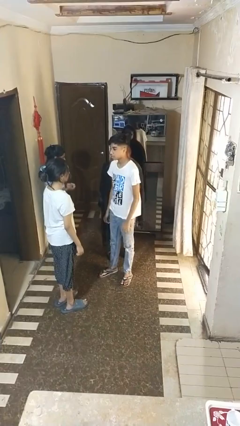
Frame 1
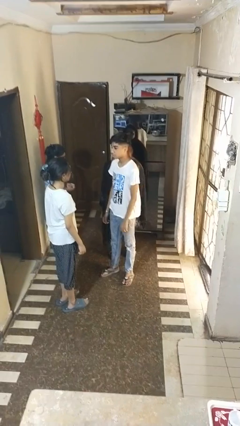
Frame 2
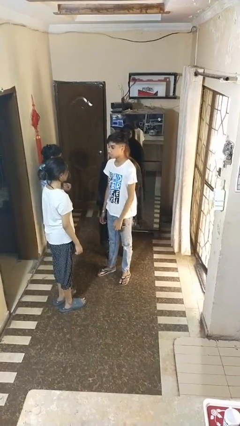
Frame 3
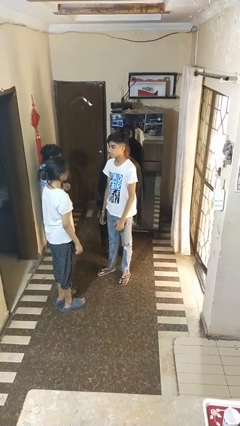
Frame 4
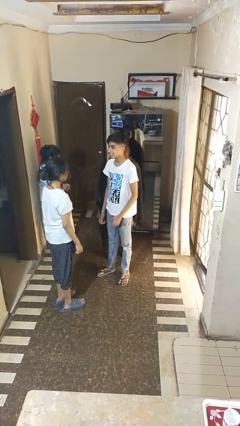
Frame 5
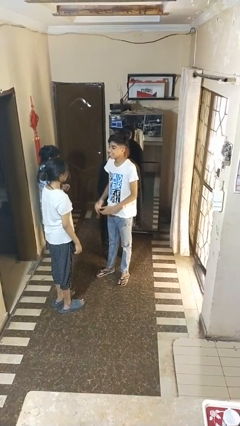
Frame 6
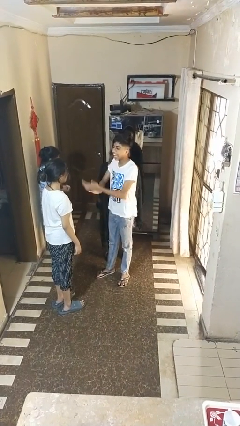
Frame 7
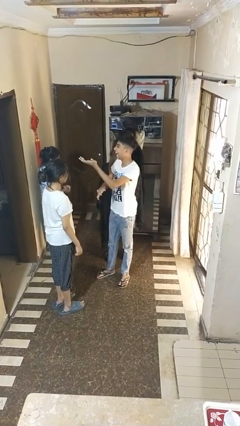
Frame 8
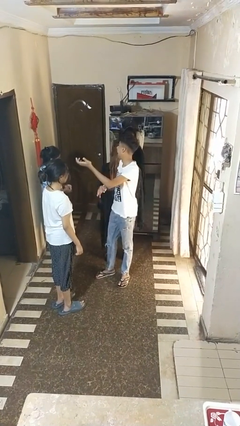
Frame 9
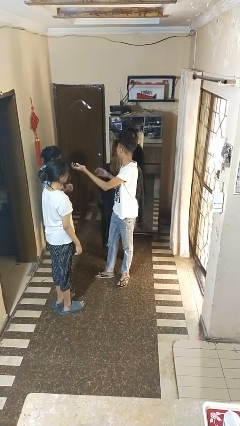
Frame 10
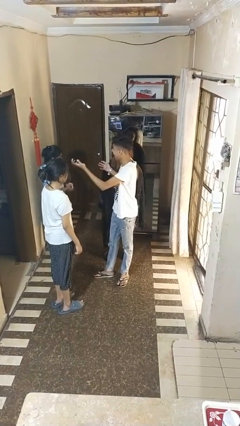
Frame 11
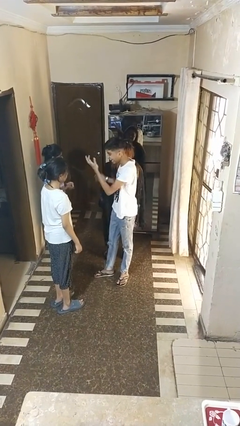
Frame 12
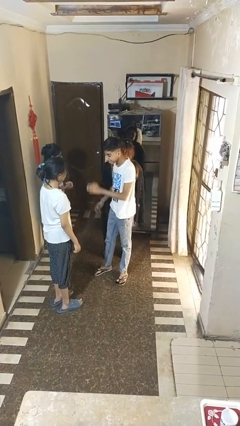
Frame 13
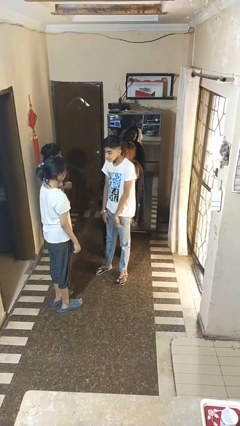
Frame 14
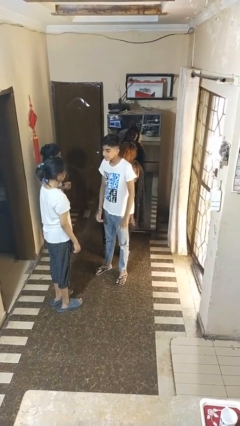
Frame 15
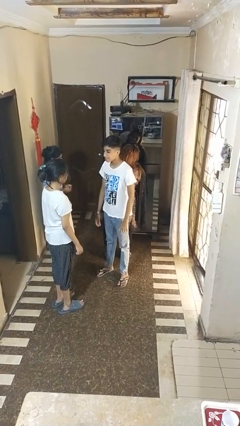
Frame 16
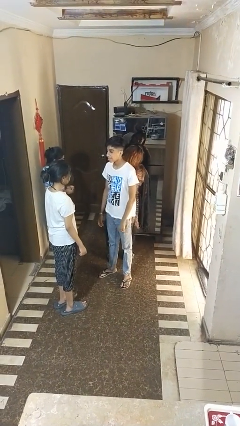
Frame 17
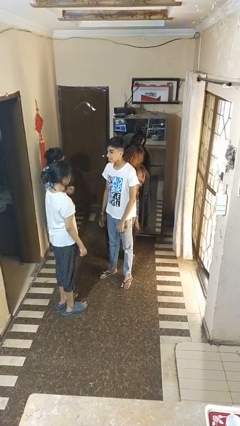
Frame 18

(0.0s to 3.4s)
person laughs with person

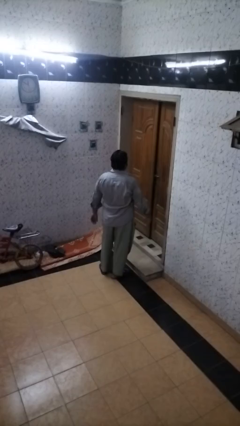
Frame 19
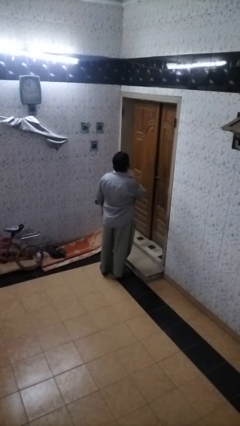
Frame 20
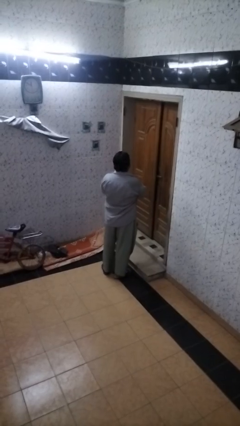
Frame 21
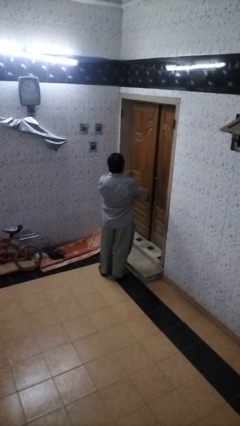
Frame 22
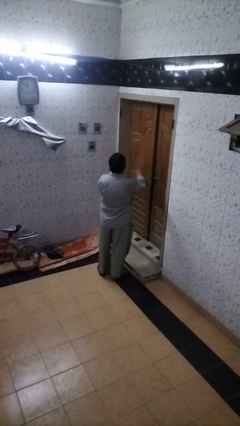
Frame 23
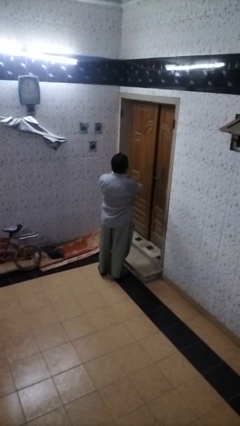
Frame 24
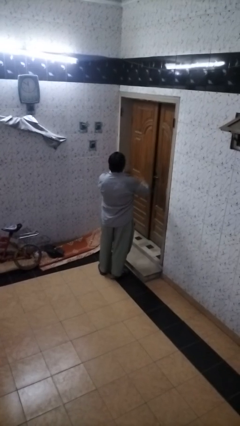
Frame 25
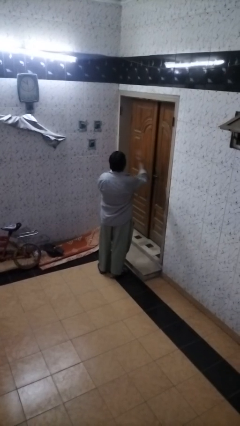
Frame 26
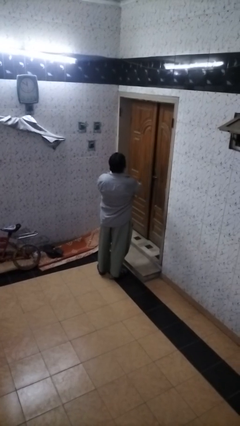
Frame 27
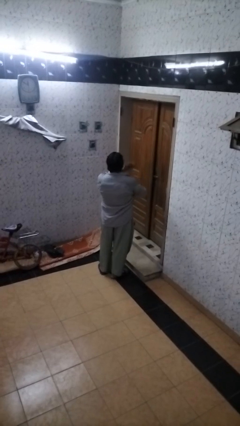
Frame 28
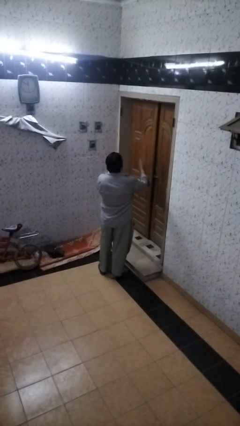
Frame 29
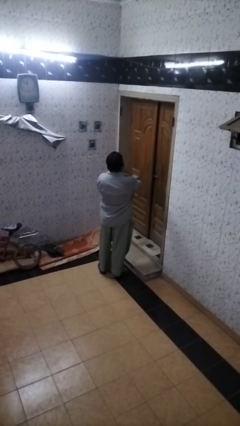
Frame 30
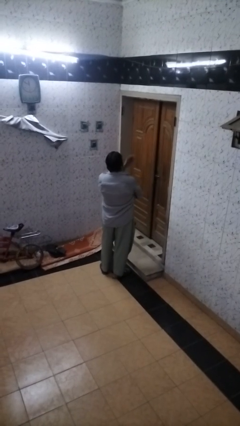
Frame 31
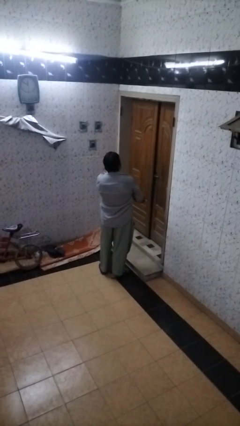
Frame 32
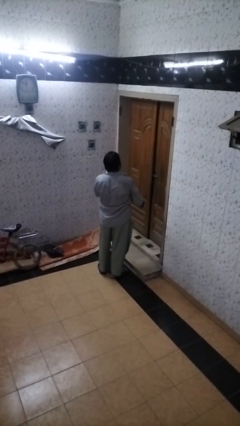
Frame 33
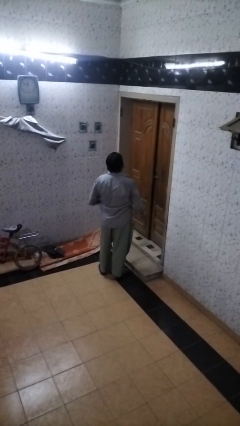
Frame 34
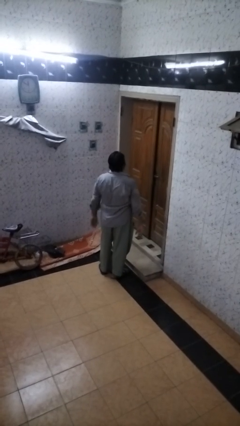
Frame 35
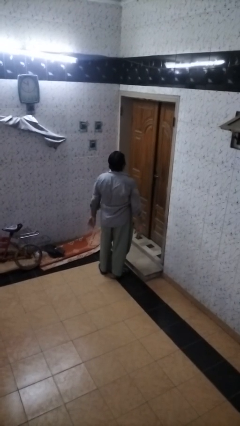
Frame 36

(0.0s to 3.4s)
person drums on chest

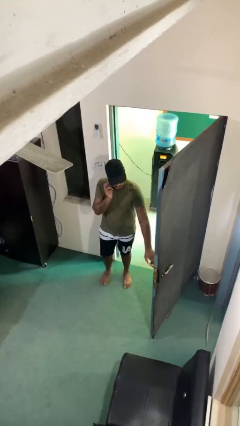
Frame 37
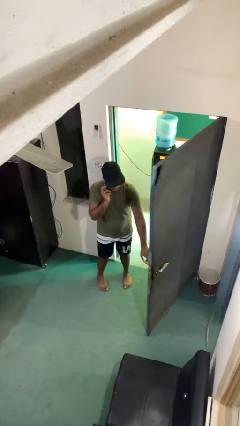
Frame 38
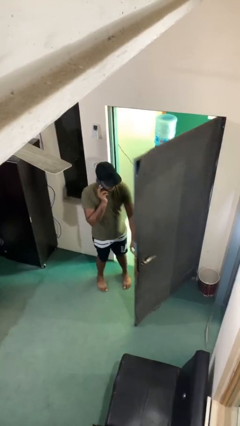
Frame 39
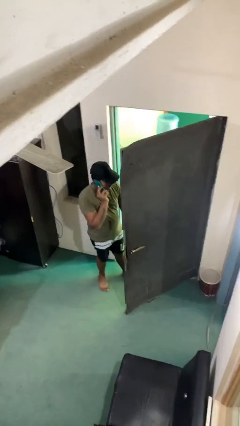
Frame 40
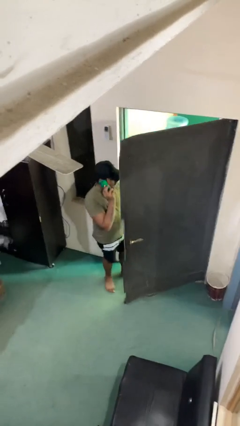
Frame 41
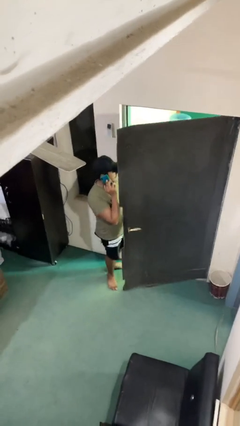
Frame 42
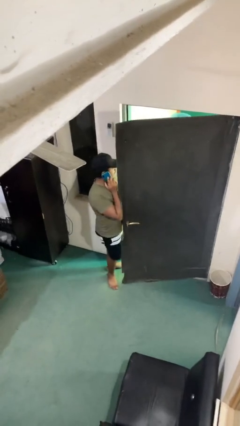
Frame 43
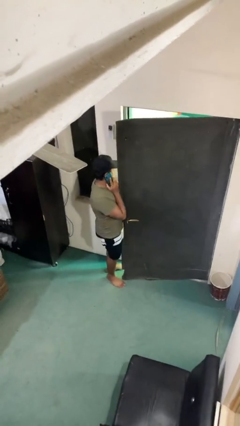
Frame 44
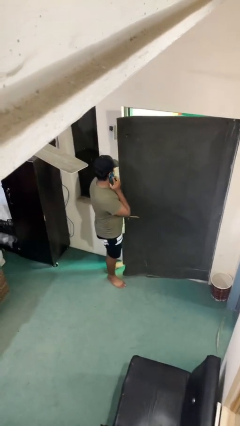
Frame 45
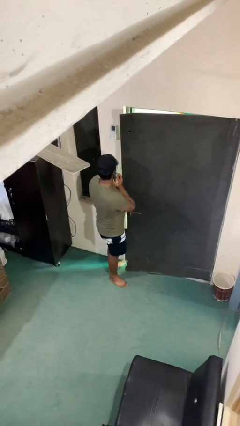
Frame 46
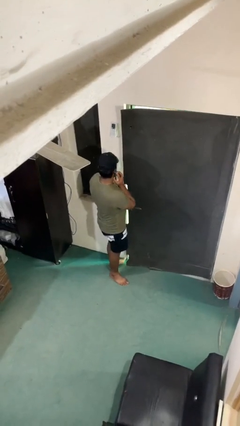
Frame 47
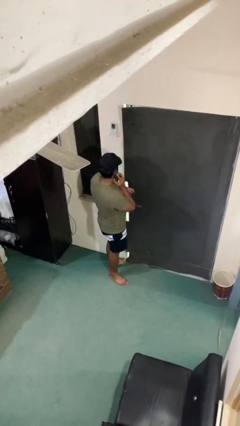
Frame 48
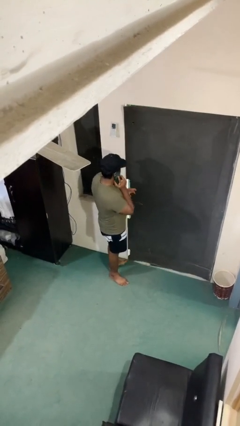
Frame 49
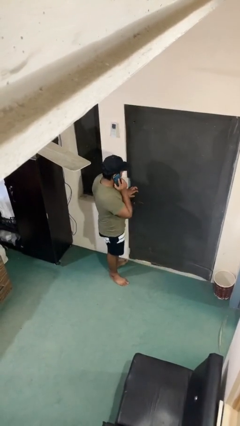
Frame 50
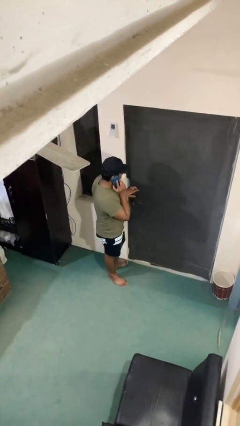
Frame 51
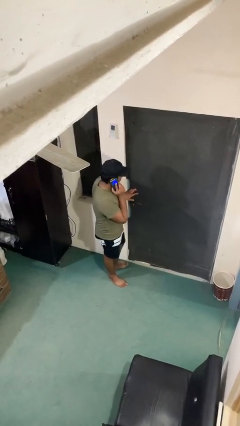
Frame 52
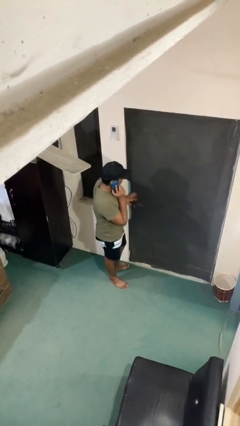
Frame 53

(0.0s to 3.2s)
person closes facility door

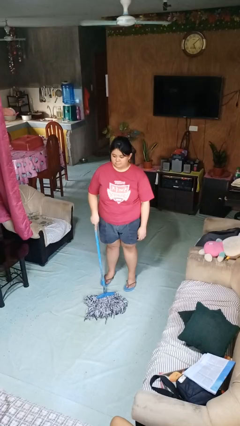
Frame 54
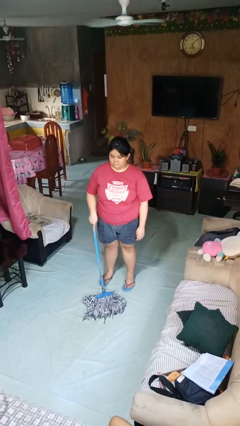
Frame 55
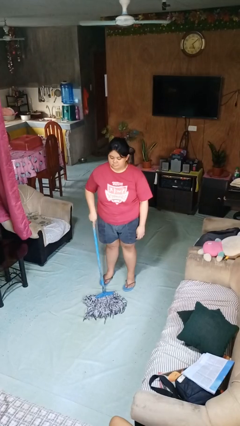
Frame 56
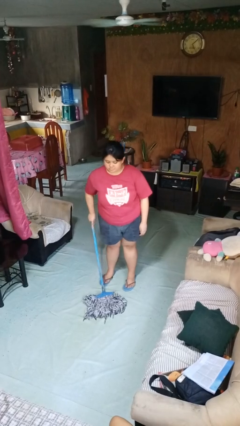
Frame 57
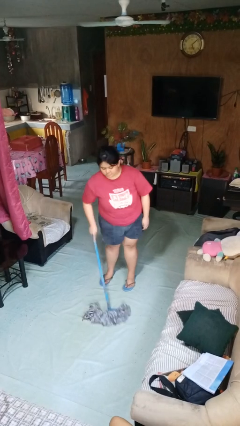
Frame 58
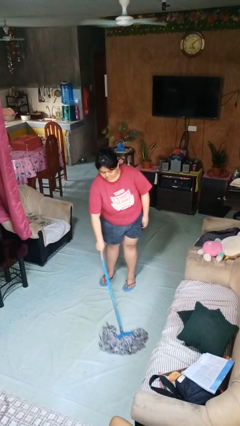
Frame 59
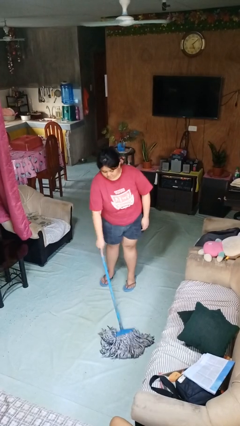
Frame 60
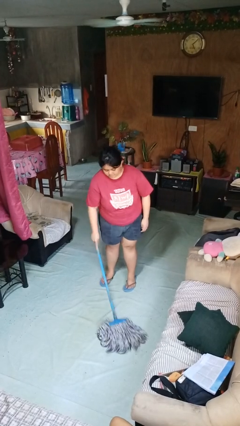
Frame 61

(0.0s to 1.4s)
person mops

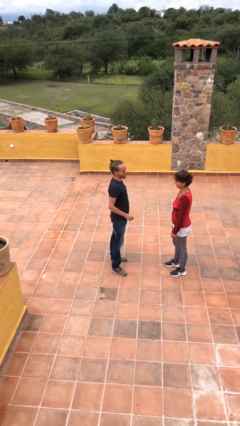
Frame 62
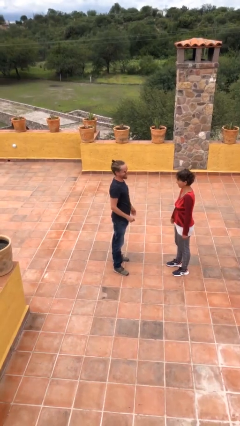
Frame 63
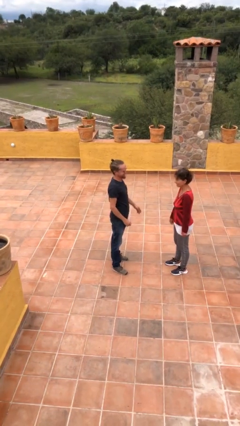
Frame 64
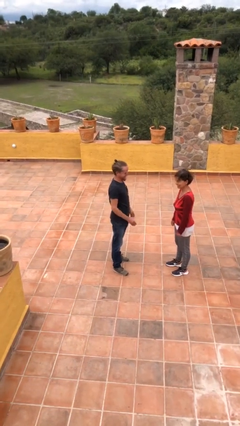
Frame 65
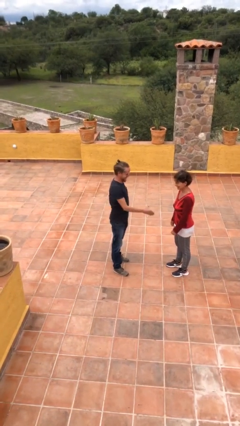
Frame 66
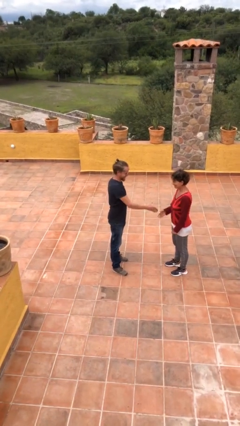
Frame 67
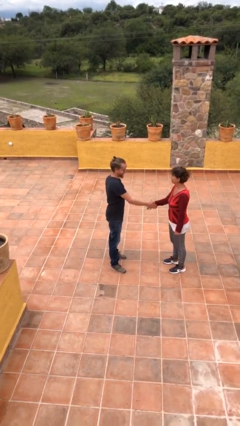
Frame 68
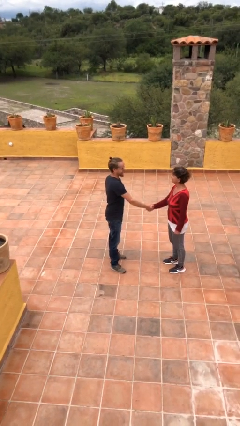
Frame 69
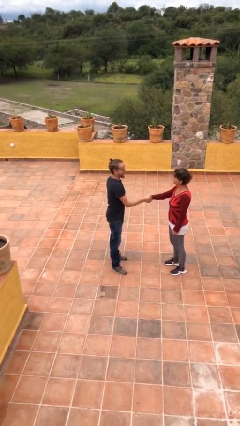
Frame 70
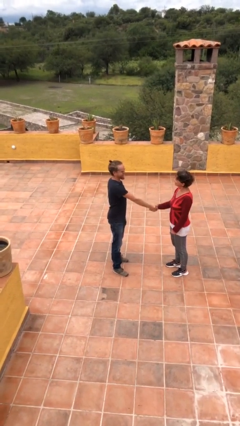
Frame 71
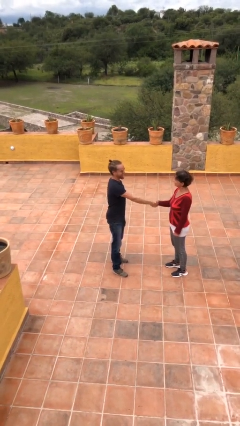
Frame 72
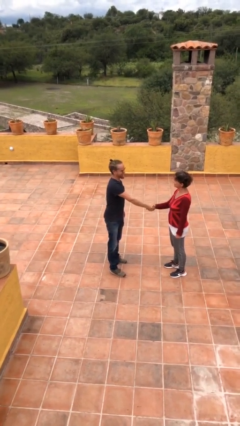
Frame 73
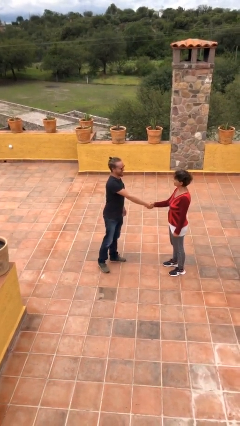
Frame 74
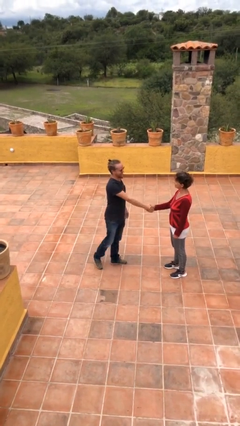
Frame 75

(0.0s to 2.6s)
person shakes hand

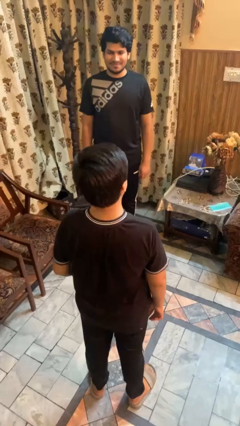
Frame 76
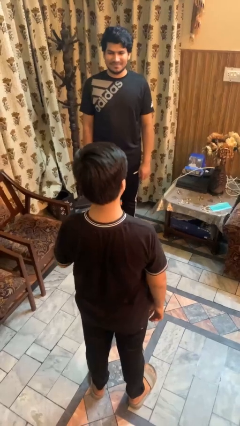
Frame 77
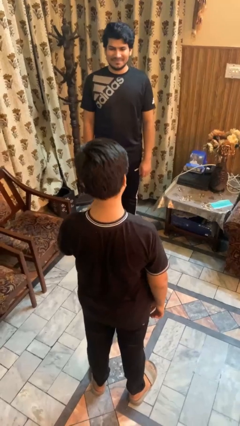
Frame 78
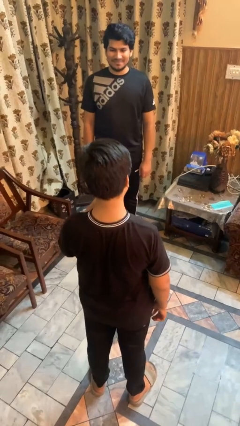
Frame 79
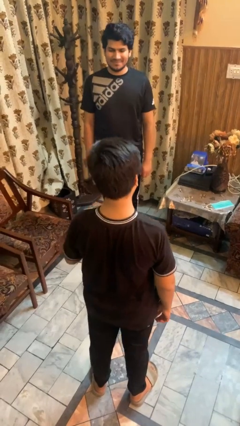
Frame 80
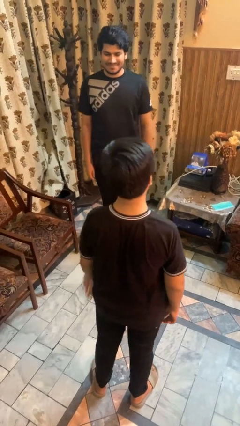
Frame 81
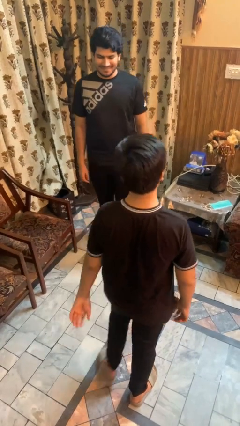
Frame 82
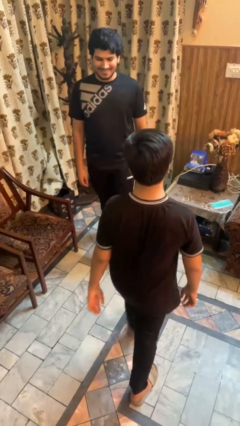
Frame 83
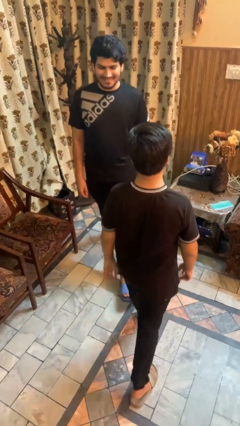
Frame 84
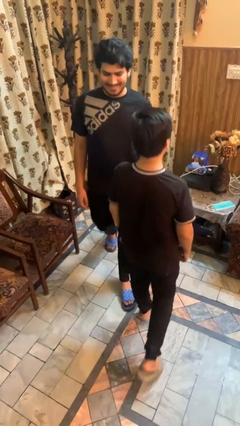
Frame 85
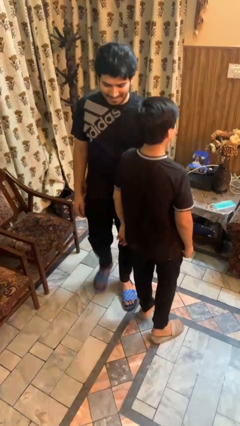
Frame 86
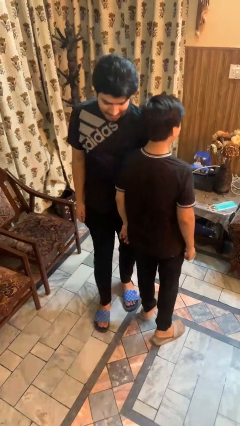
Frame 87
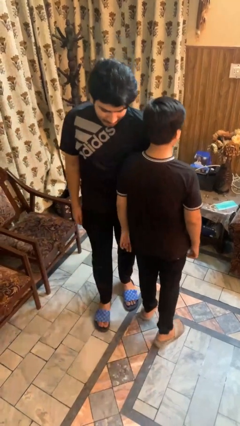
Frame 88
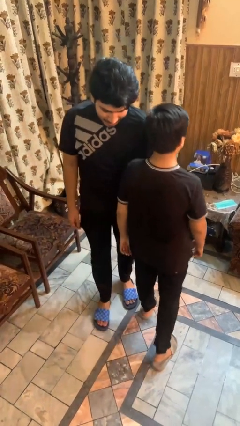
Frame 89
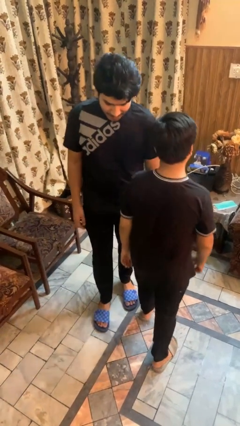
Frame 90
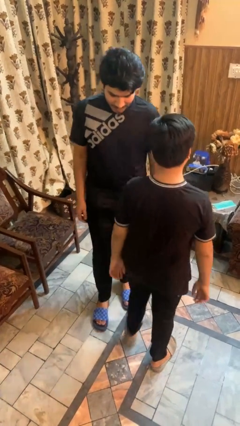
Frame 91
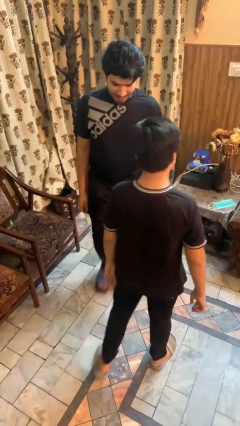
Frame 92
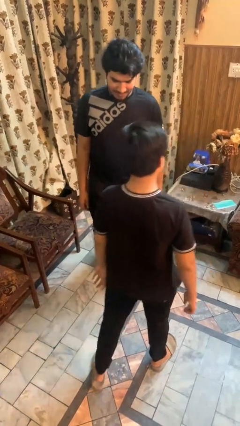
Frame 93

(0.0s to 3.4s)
person bumps into person

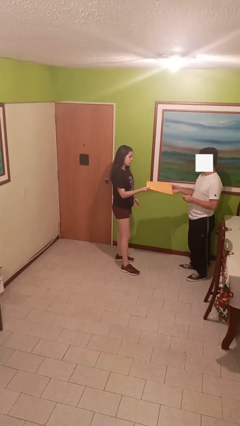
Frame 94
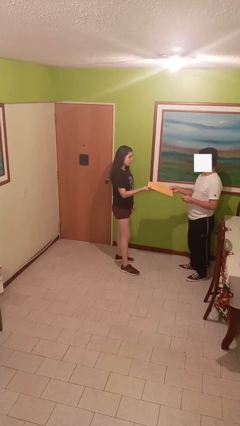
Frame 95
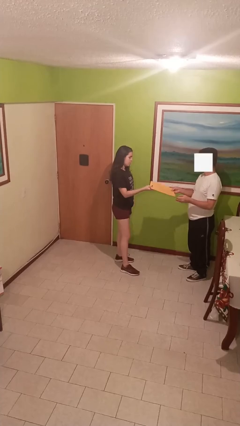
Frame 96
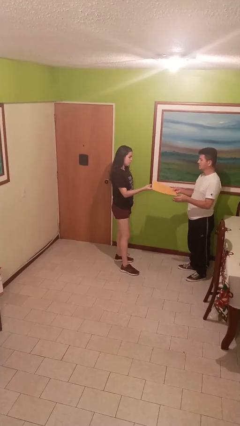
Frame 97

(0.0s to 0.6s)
person transfers object to person
